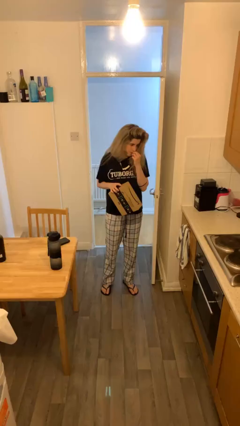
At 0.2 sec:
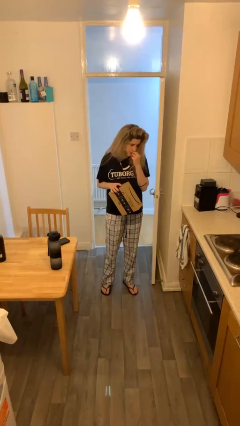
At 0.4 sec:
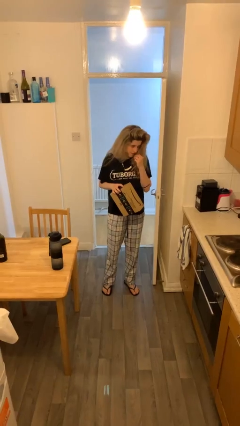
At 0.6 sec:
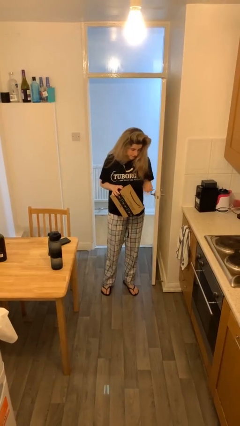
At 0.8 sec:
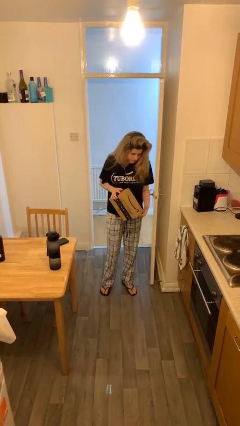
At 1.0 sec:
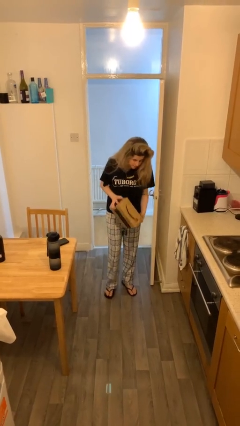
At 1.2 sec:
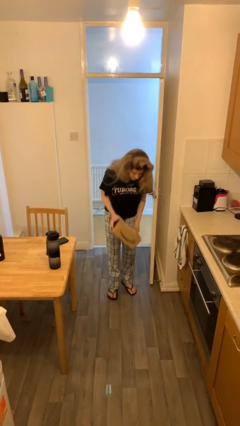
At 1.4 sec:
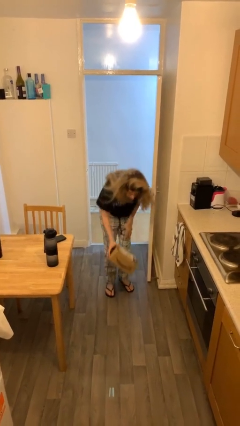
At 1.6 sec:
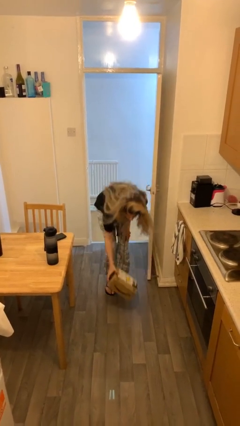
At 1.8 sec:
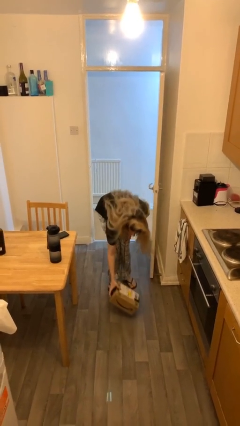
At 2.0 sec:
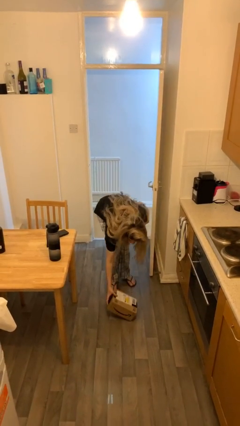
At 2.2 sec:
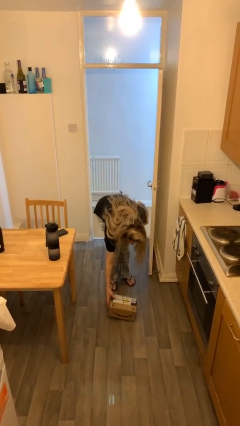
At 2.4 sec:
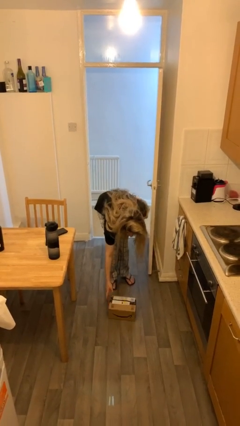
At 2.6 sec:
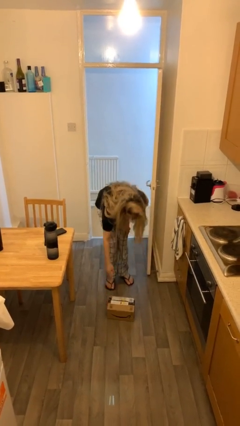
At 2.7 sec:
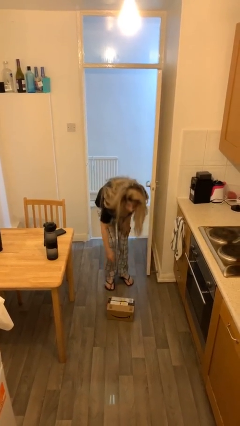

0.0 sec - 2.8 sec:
person puts down object on floor

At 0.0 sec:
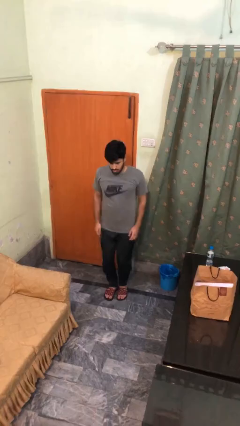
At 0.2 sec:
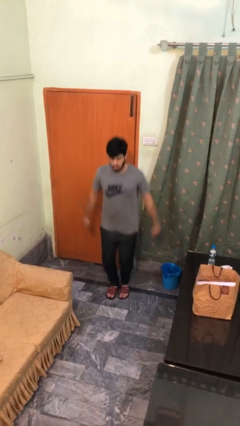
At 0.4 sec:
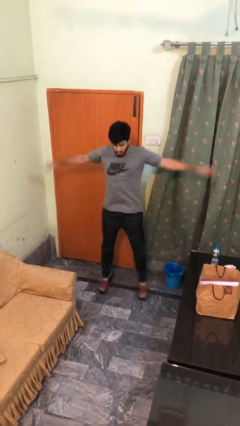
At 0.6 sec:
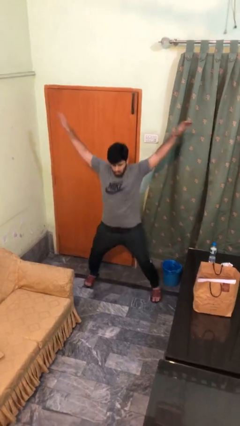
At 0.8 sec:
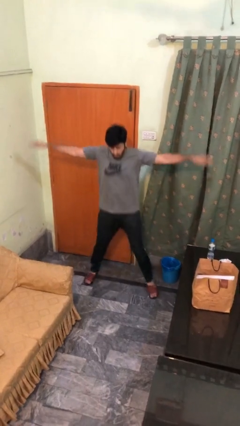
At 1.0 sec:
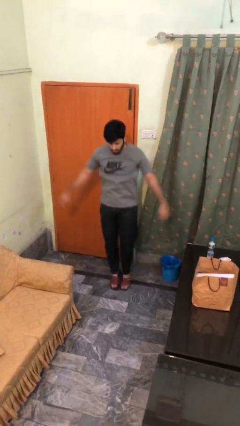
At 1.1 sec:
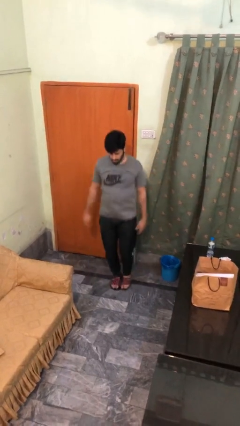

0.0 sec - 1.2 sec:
person exercises with jumping jacks

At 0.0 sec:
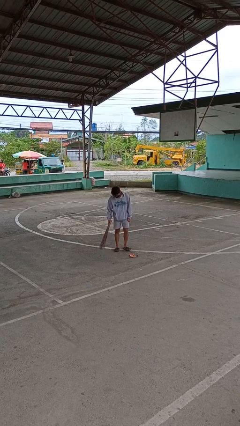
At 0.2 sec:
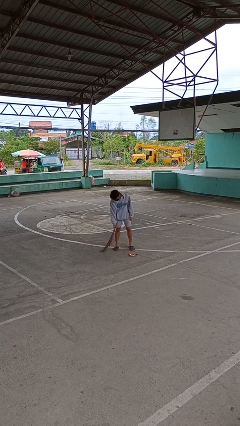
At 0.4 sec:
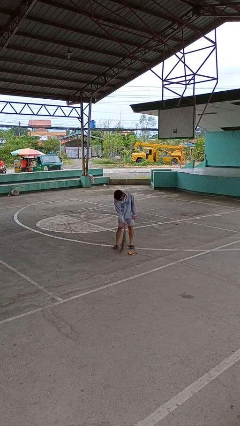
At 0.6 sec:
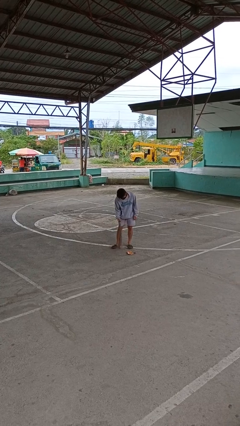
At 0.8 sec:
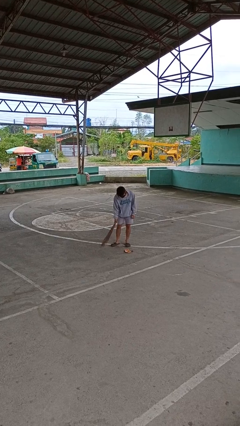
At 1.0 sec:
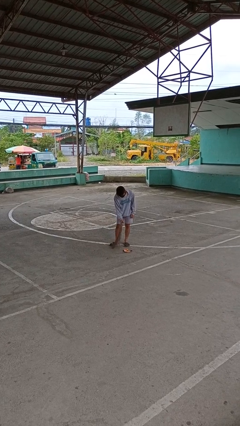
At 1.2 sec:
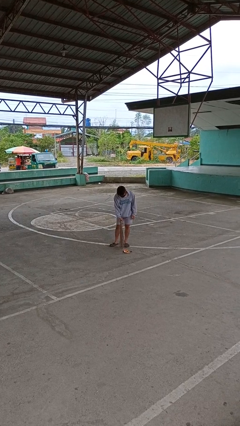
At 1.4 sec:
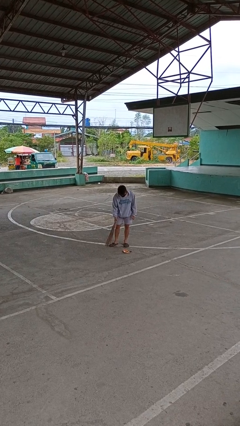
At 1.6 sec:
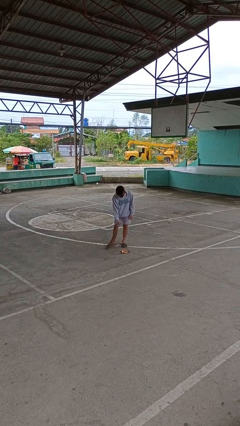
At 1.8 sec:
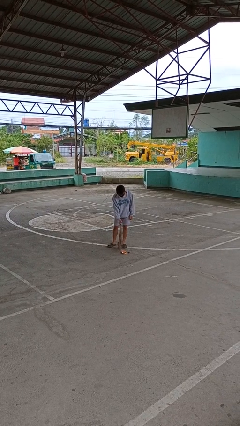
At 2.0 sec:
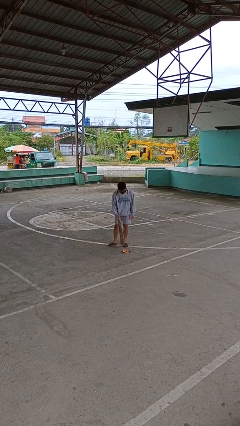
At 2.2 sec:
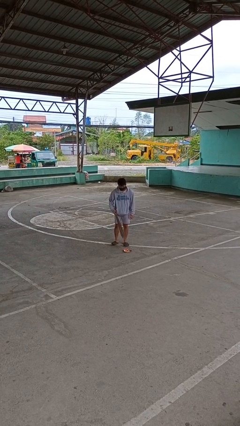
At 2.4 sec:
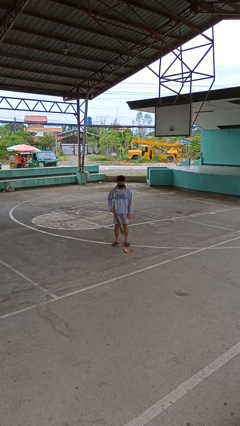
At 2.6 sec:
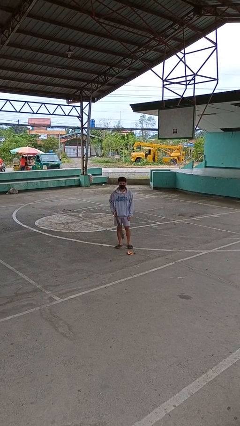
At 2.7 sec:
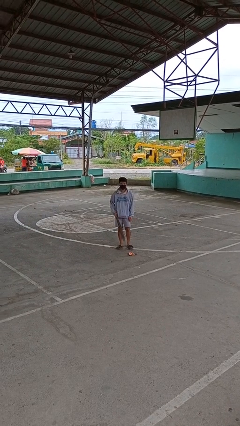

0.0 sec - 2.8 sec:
person sweeps floor

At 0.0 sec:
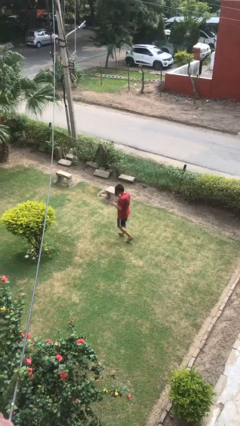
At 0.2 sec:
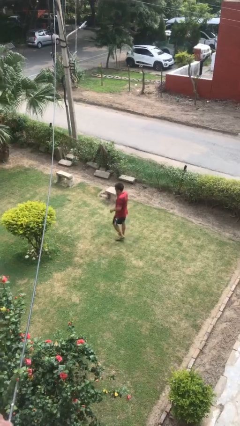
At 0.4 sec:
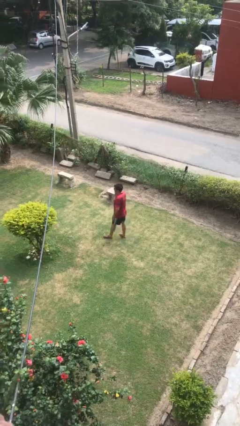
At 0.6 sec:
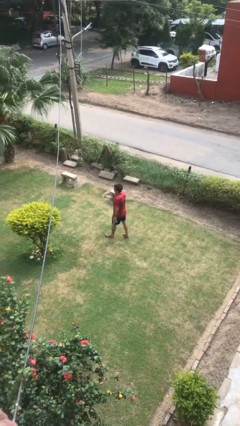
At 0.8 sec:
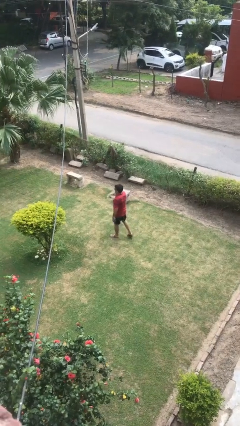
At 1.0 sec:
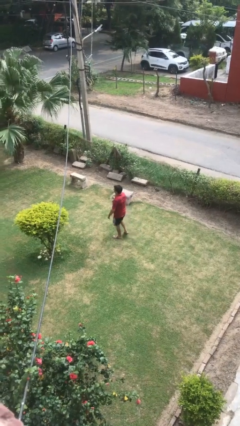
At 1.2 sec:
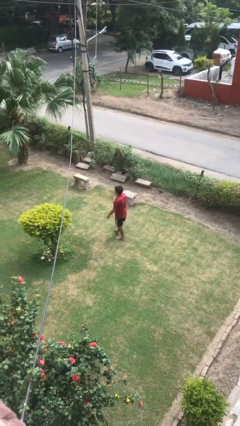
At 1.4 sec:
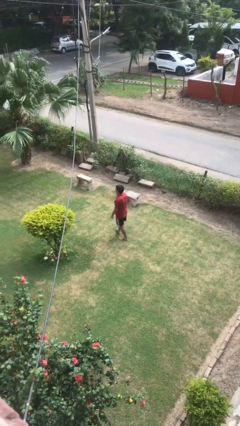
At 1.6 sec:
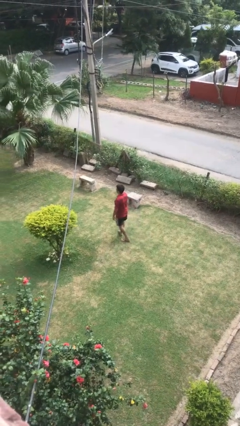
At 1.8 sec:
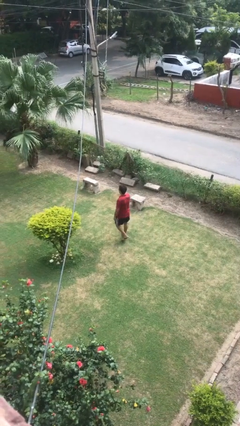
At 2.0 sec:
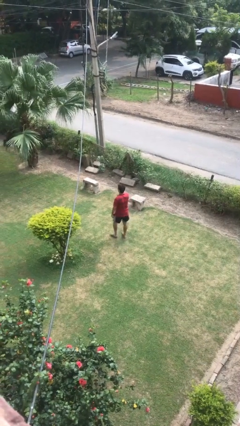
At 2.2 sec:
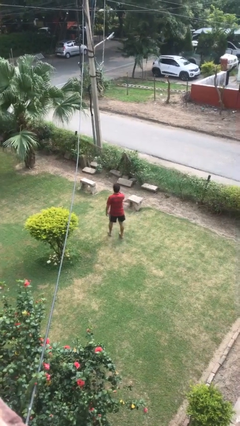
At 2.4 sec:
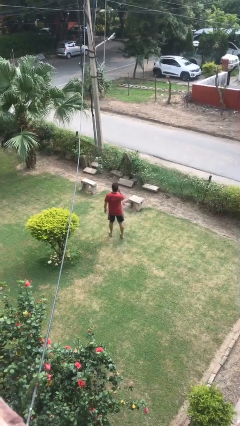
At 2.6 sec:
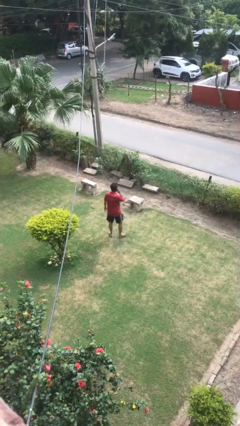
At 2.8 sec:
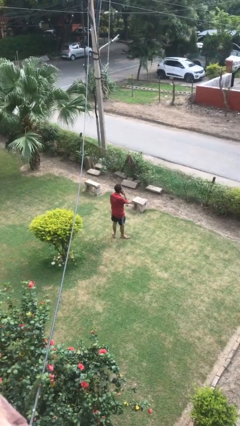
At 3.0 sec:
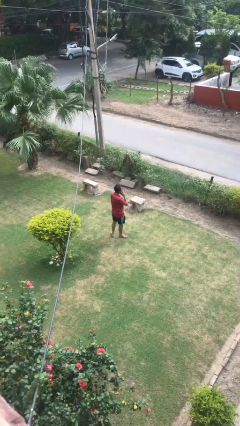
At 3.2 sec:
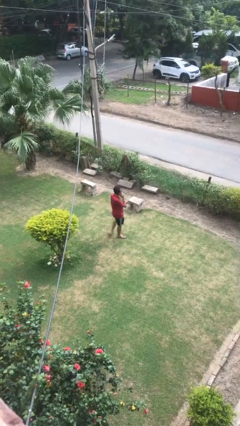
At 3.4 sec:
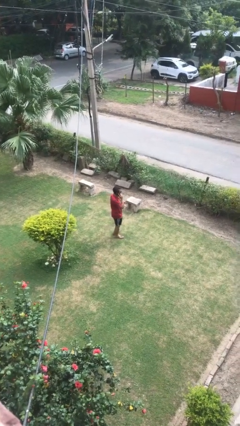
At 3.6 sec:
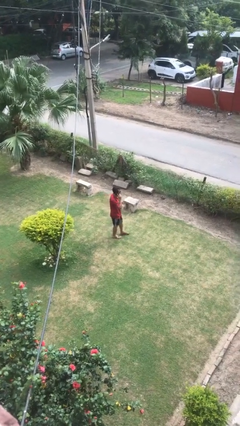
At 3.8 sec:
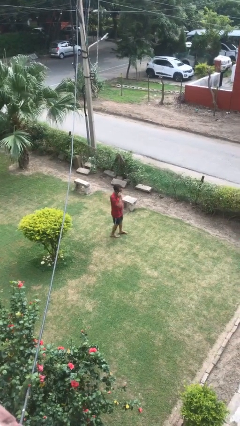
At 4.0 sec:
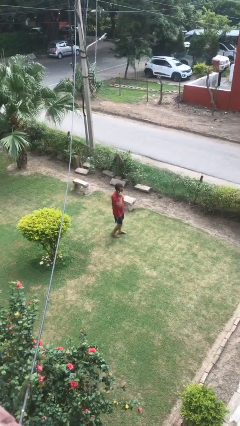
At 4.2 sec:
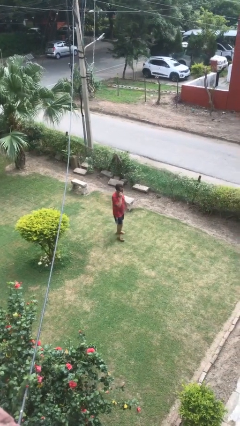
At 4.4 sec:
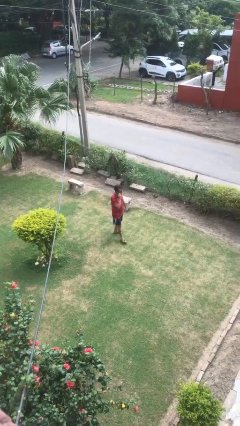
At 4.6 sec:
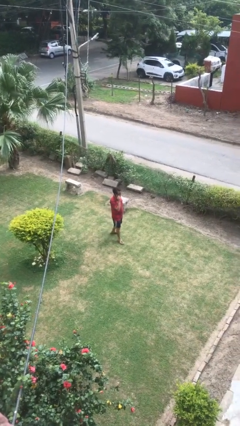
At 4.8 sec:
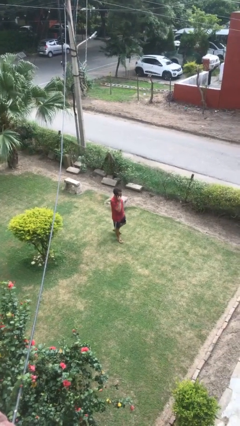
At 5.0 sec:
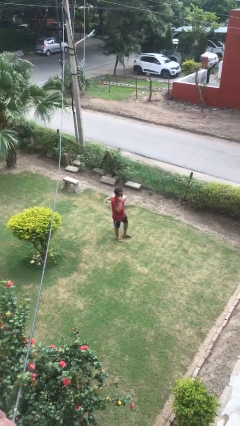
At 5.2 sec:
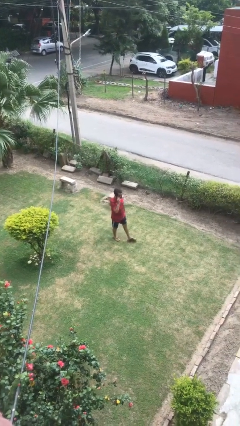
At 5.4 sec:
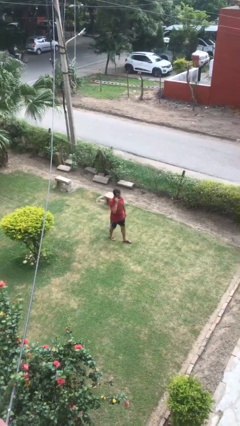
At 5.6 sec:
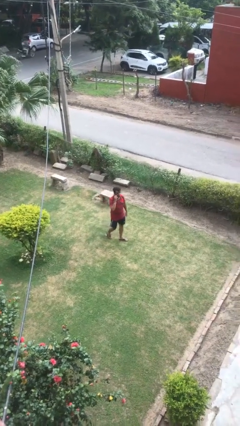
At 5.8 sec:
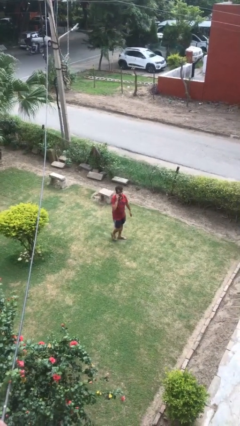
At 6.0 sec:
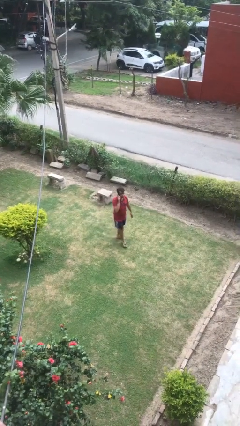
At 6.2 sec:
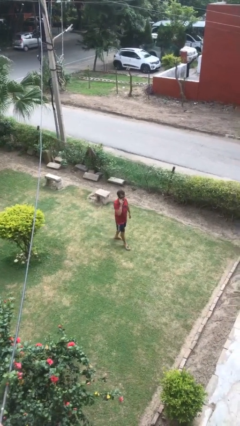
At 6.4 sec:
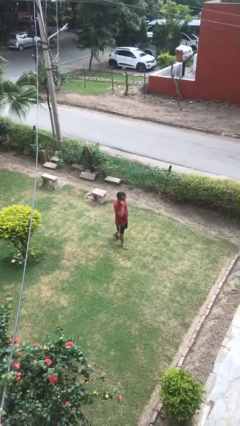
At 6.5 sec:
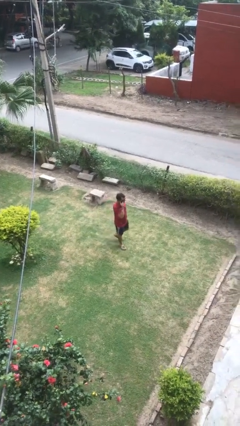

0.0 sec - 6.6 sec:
person talks on phone

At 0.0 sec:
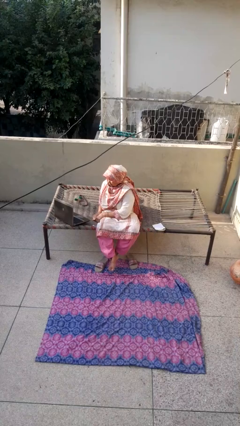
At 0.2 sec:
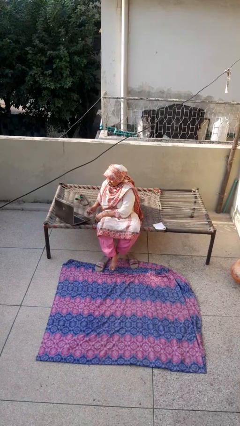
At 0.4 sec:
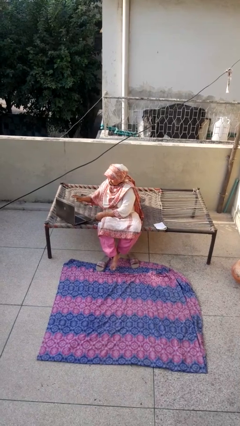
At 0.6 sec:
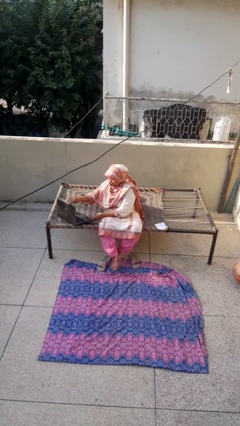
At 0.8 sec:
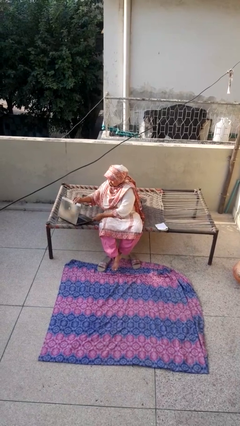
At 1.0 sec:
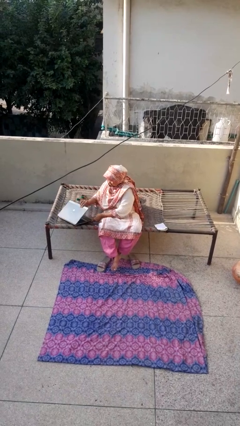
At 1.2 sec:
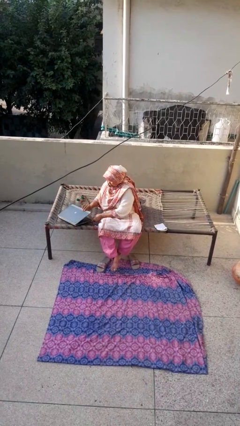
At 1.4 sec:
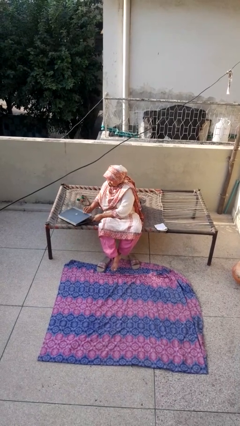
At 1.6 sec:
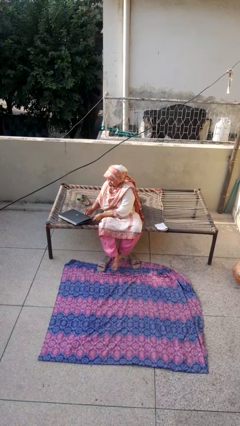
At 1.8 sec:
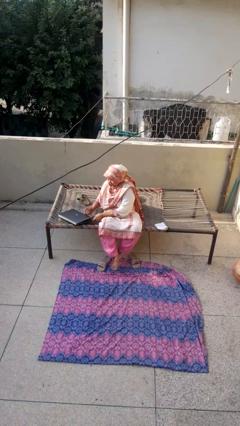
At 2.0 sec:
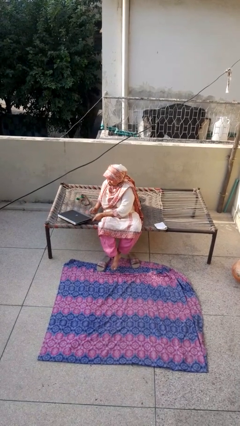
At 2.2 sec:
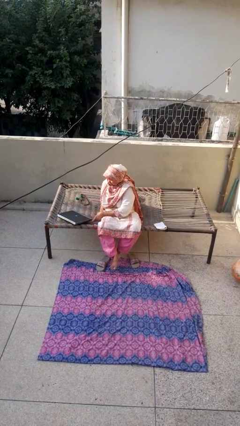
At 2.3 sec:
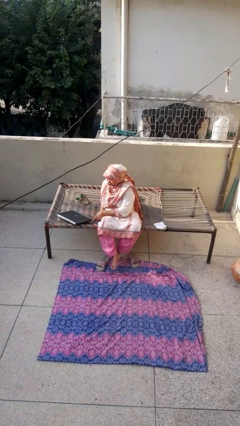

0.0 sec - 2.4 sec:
person closes laptop

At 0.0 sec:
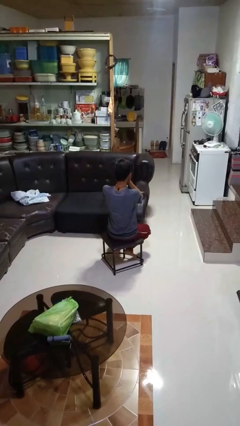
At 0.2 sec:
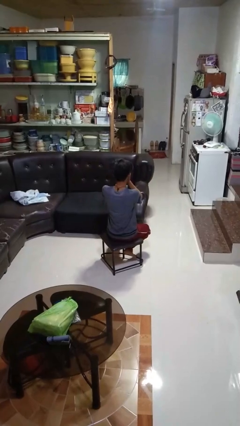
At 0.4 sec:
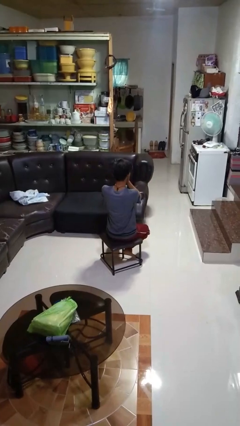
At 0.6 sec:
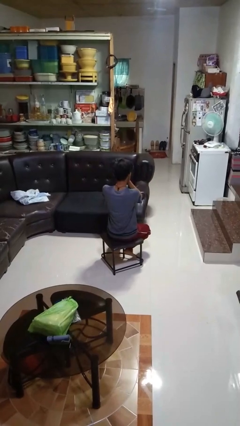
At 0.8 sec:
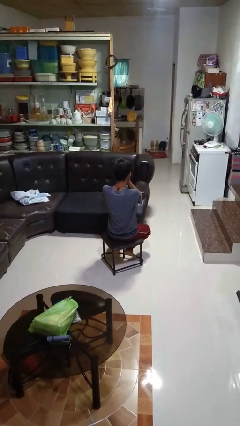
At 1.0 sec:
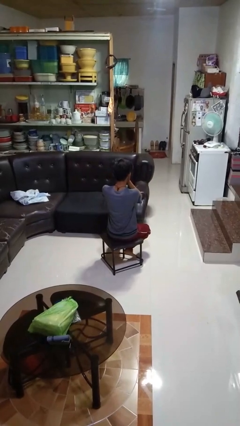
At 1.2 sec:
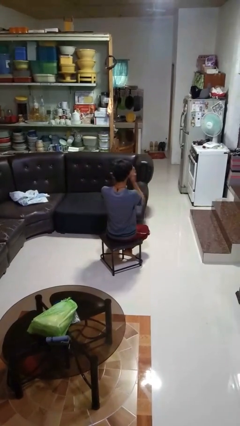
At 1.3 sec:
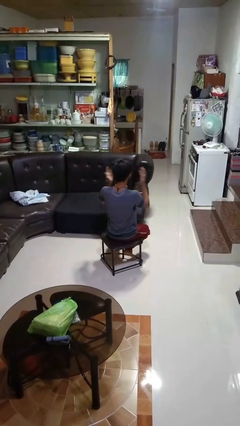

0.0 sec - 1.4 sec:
person covers face with hands
